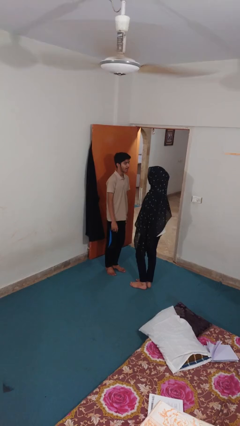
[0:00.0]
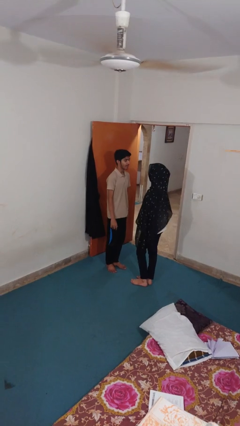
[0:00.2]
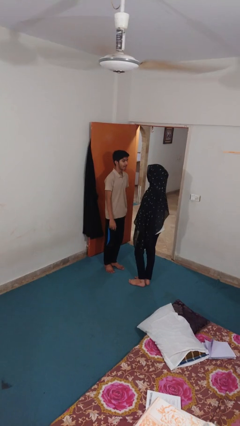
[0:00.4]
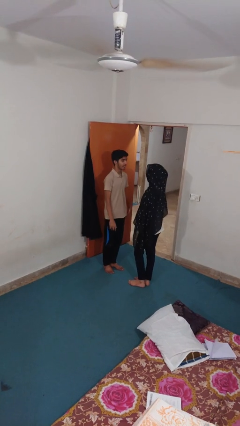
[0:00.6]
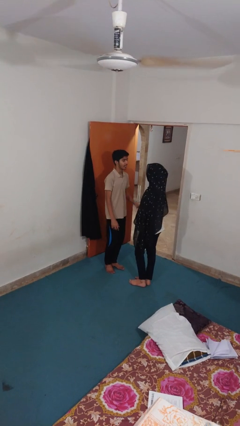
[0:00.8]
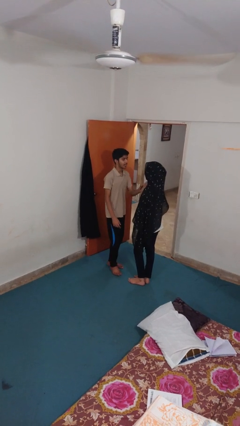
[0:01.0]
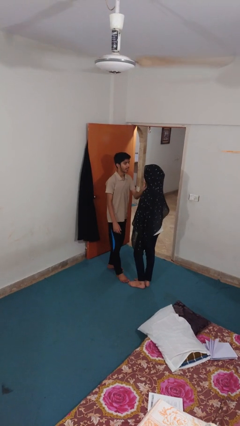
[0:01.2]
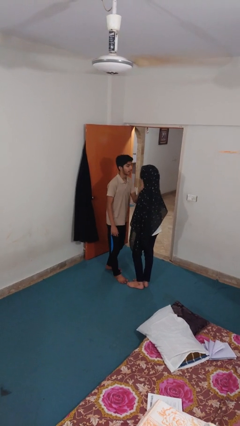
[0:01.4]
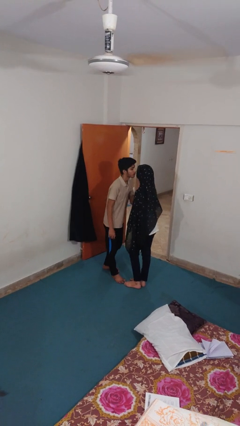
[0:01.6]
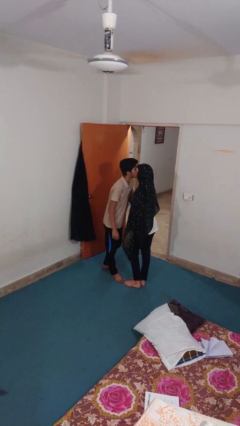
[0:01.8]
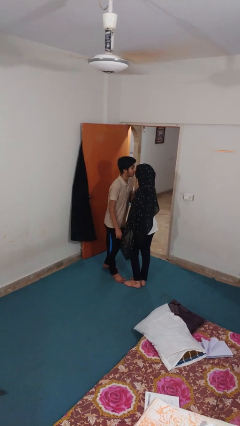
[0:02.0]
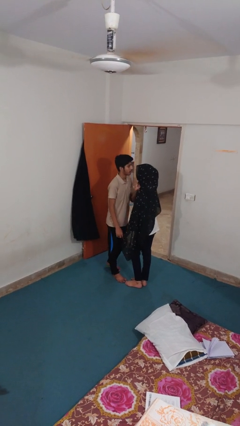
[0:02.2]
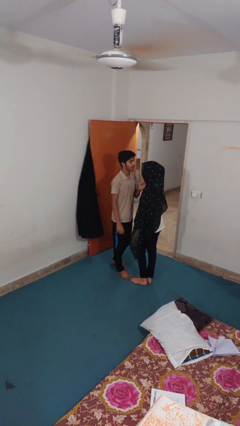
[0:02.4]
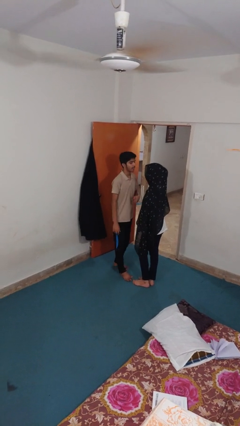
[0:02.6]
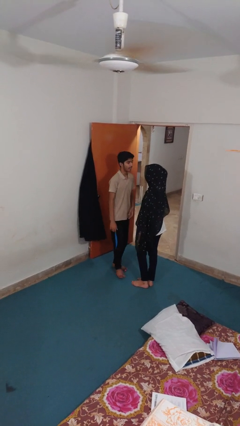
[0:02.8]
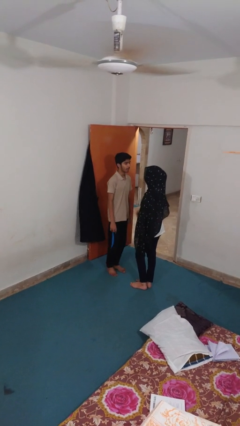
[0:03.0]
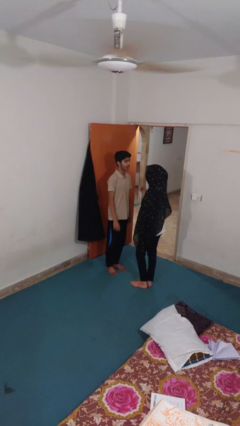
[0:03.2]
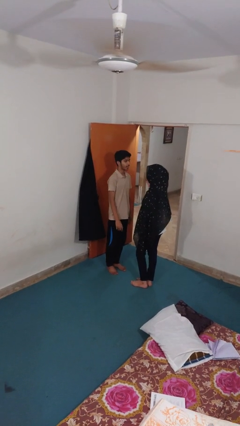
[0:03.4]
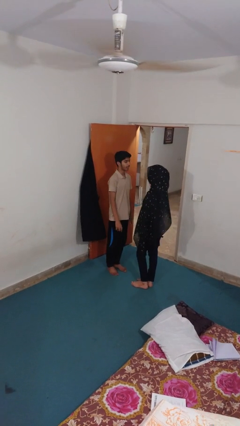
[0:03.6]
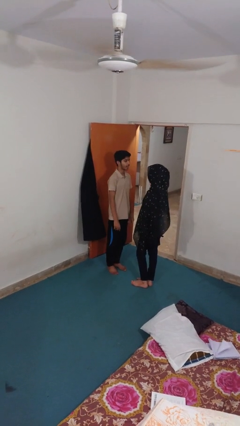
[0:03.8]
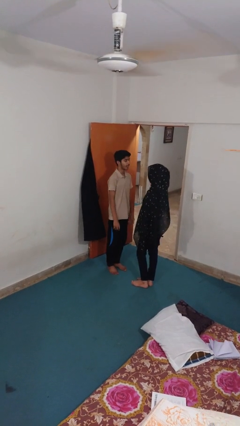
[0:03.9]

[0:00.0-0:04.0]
person kisses cheek of person

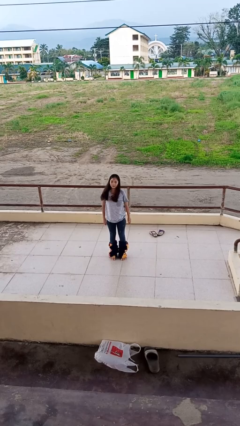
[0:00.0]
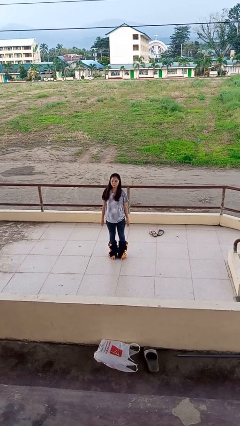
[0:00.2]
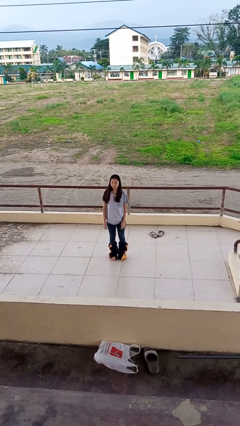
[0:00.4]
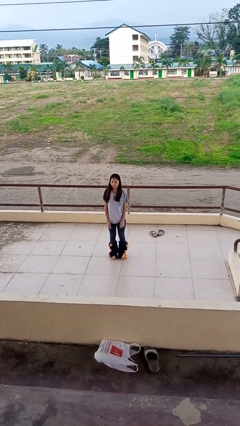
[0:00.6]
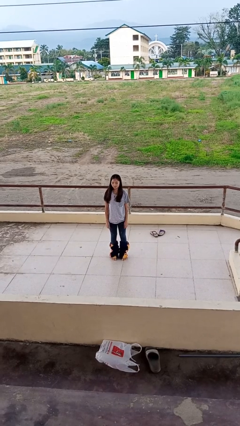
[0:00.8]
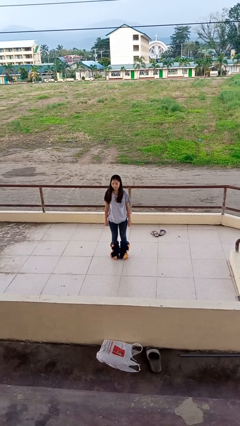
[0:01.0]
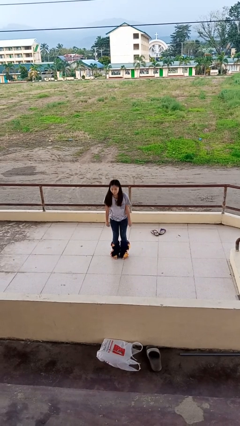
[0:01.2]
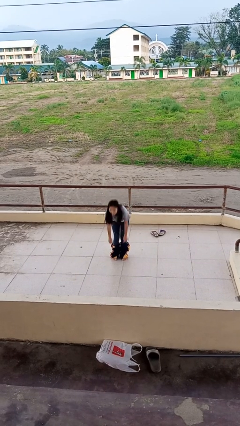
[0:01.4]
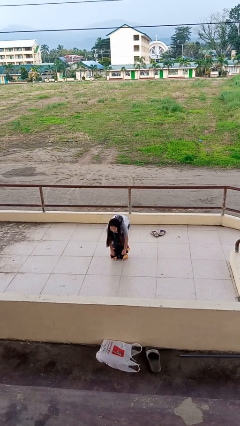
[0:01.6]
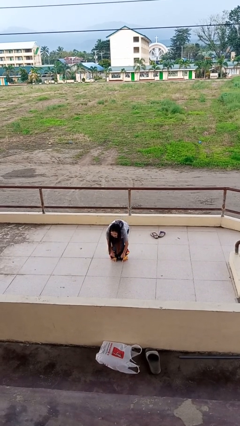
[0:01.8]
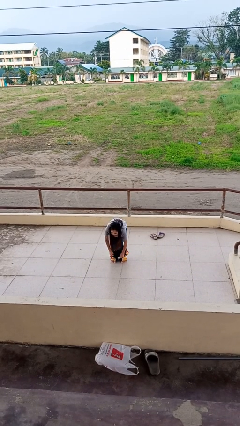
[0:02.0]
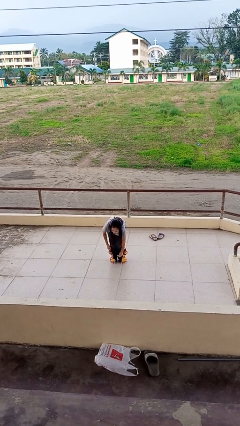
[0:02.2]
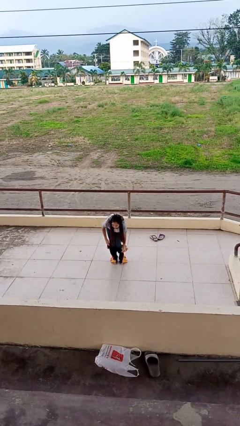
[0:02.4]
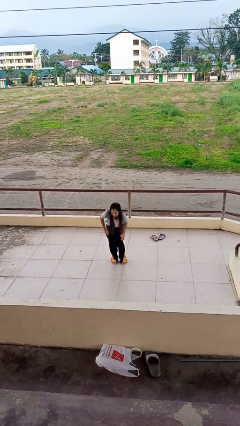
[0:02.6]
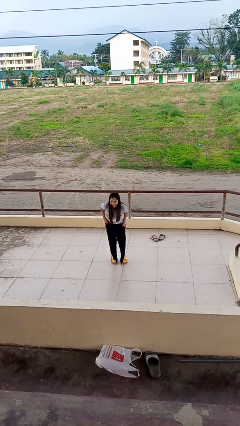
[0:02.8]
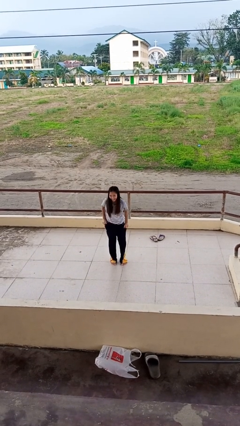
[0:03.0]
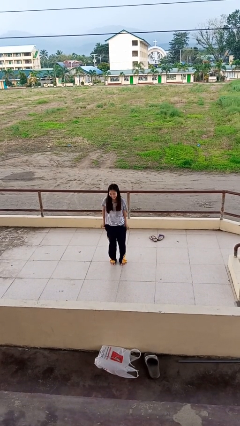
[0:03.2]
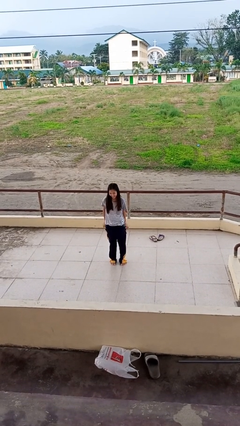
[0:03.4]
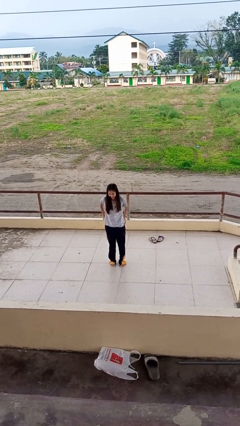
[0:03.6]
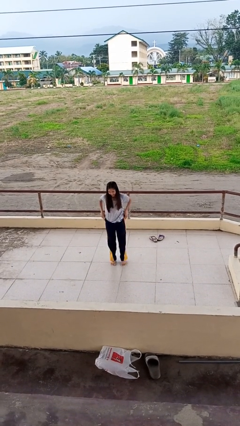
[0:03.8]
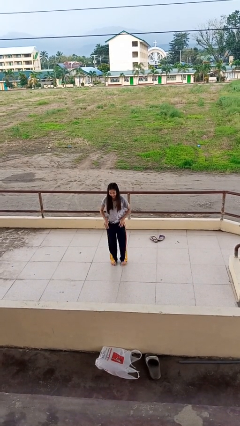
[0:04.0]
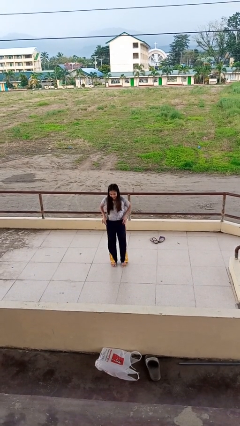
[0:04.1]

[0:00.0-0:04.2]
person puts on pants

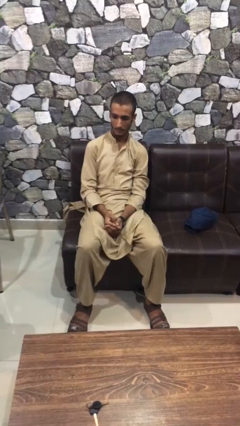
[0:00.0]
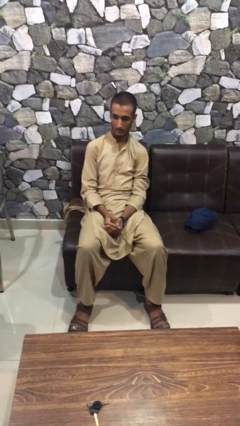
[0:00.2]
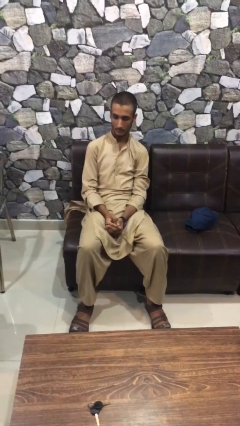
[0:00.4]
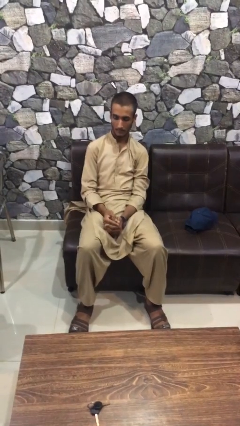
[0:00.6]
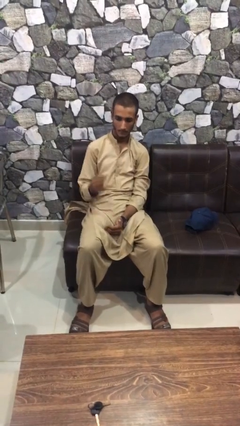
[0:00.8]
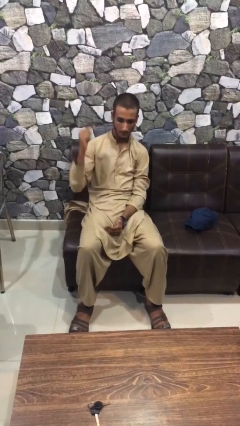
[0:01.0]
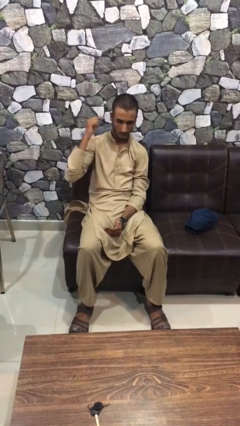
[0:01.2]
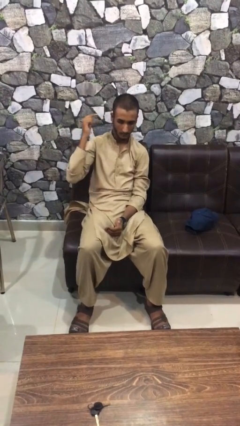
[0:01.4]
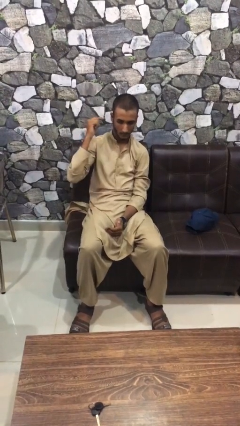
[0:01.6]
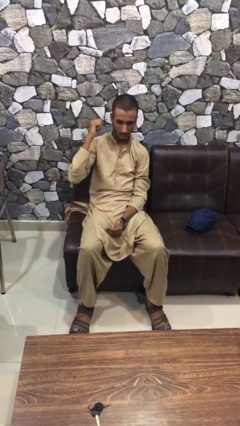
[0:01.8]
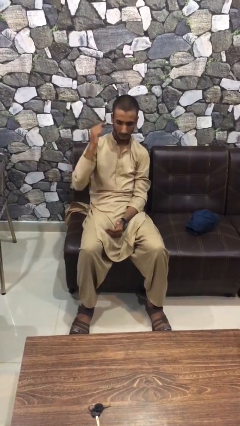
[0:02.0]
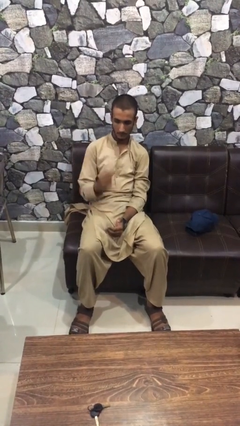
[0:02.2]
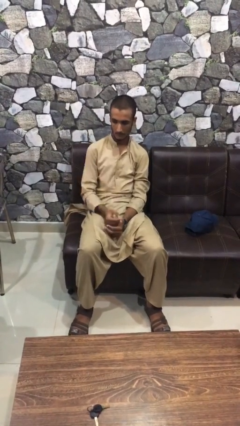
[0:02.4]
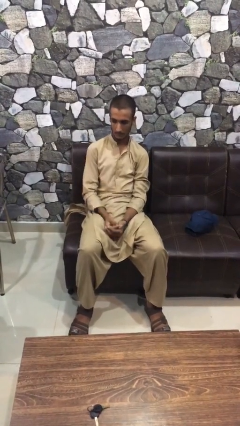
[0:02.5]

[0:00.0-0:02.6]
person gestures listen closely

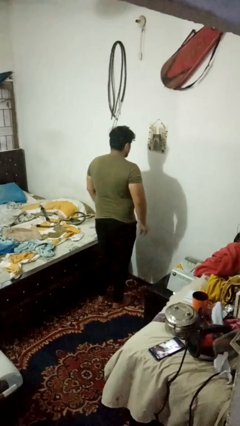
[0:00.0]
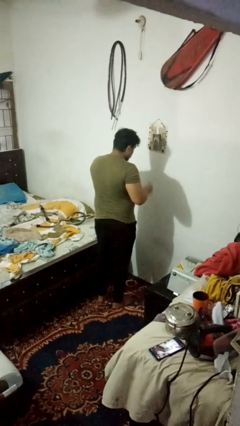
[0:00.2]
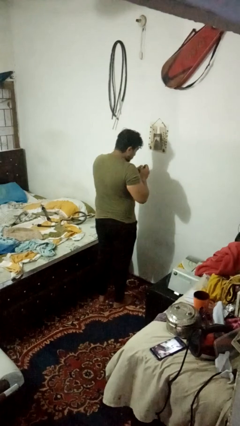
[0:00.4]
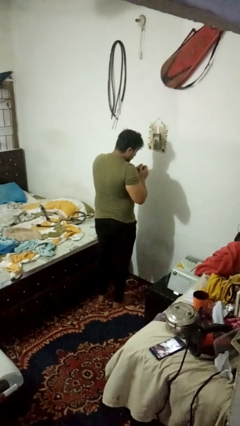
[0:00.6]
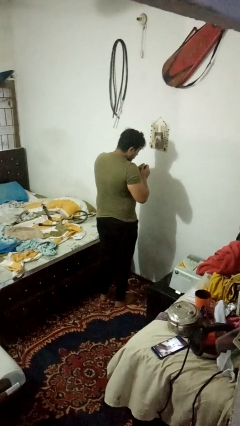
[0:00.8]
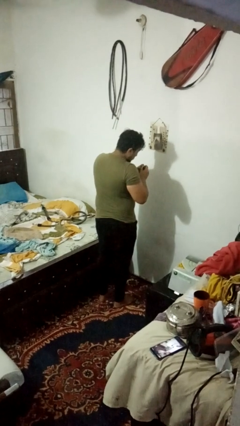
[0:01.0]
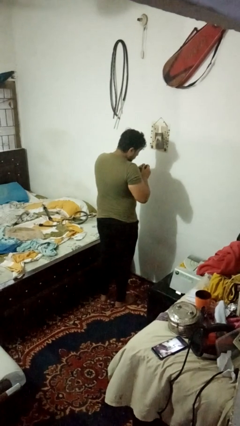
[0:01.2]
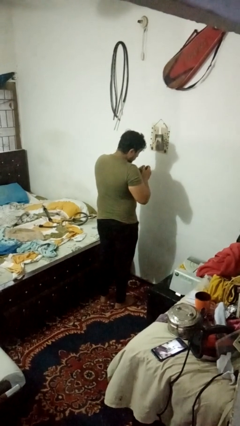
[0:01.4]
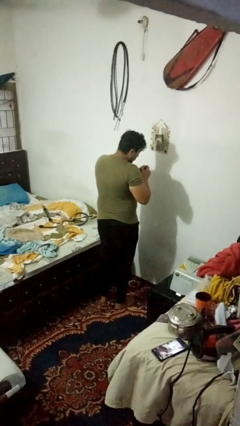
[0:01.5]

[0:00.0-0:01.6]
person paints fingernails

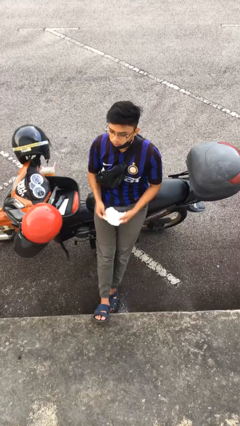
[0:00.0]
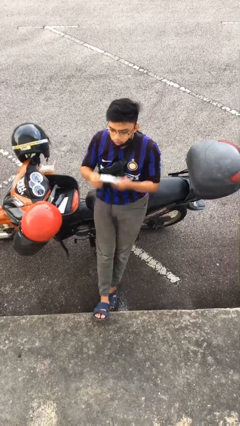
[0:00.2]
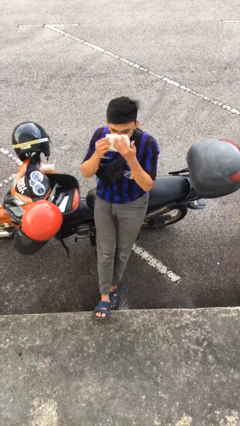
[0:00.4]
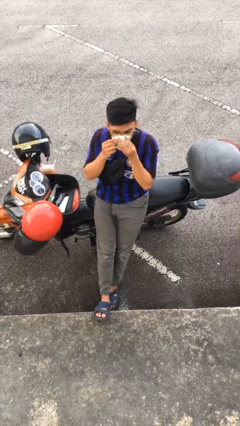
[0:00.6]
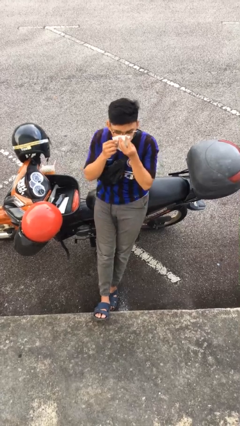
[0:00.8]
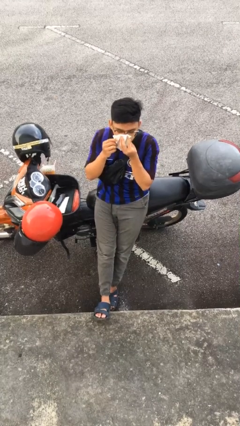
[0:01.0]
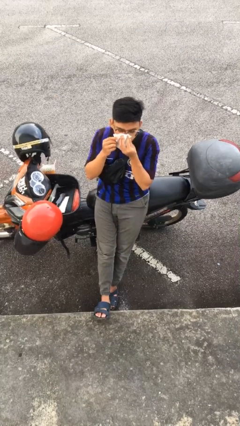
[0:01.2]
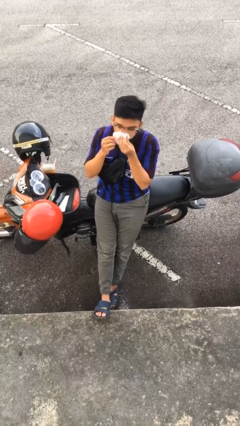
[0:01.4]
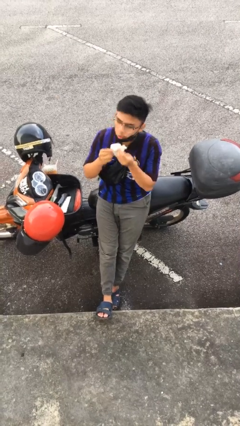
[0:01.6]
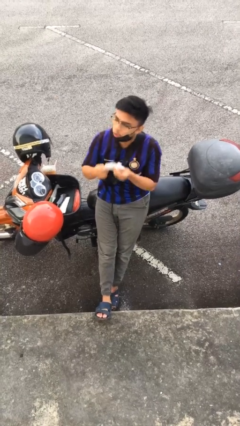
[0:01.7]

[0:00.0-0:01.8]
person blows nose

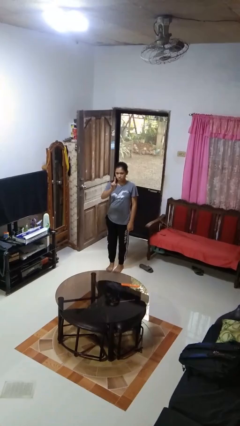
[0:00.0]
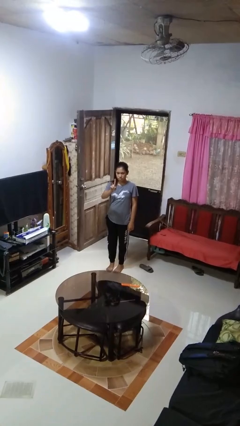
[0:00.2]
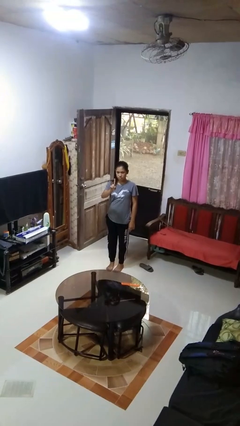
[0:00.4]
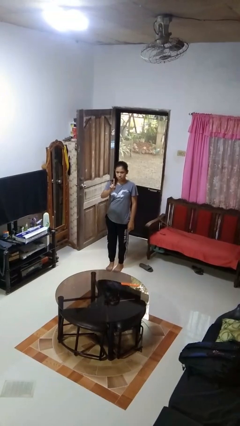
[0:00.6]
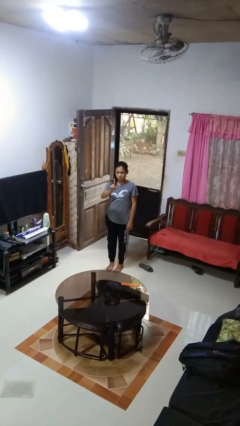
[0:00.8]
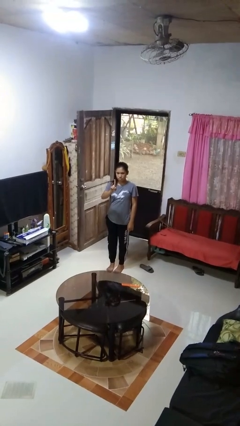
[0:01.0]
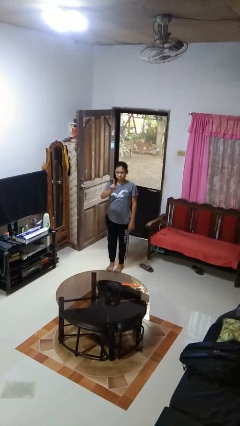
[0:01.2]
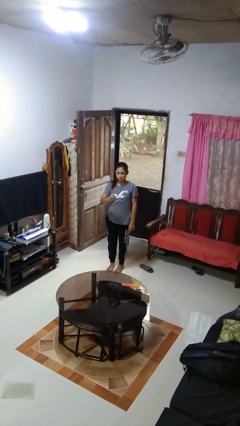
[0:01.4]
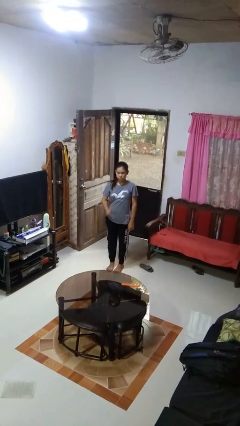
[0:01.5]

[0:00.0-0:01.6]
person gestures number one

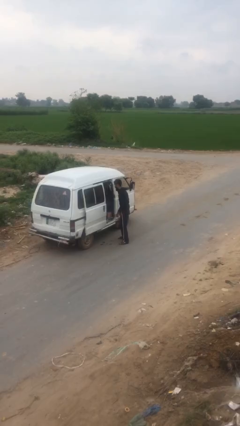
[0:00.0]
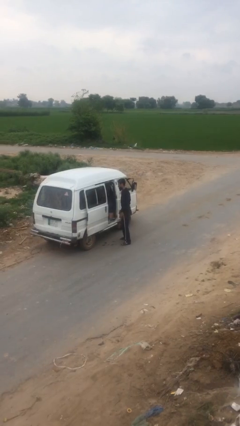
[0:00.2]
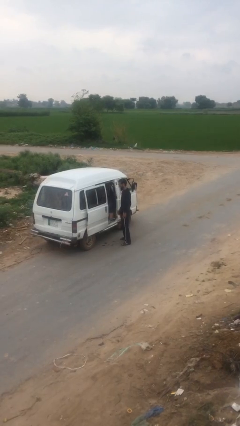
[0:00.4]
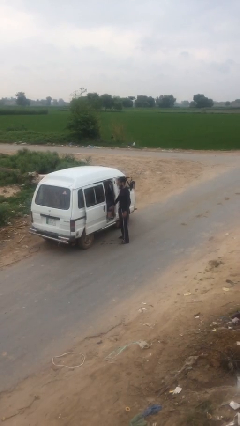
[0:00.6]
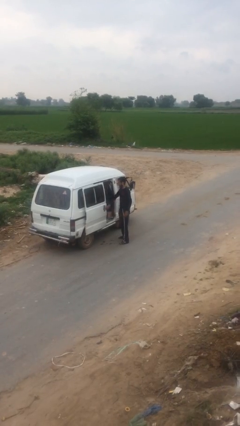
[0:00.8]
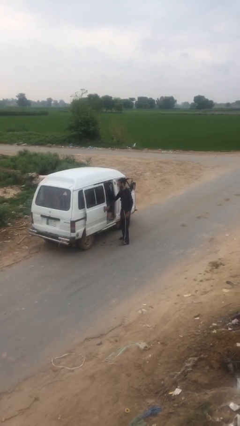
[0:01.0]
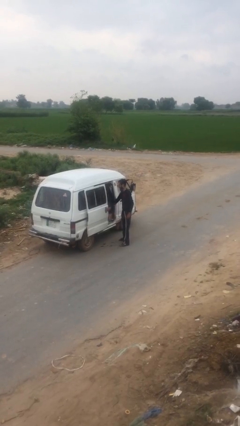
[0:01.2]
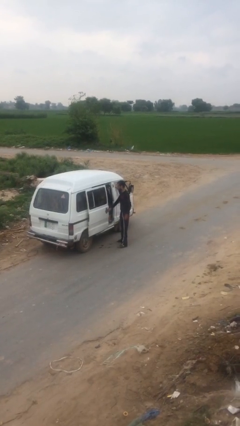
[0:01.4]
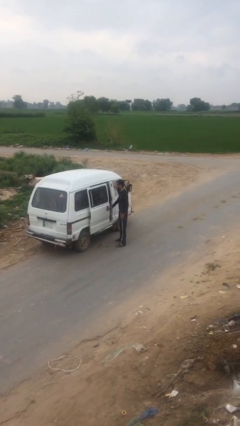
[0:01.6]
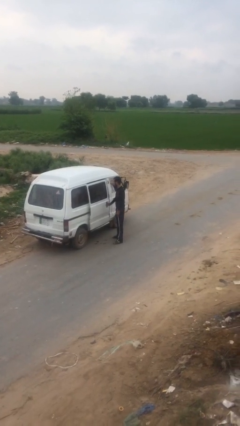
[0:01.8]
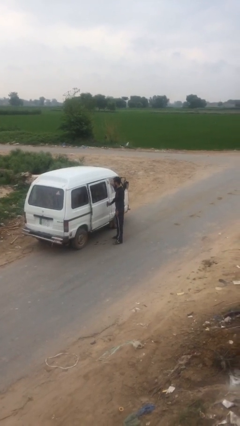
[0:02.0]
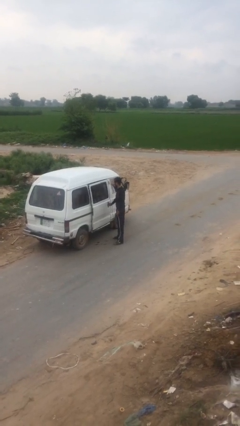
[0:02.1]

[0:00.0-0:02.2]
person closes car door
